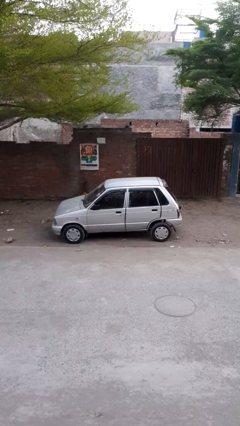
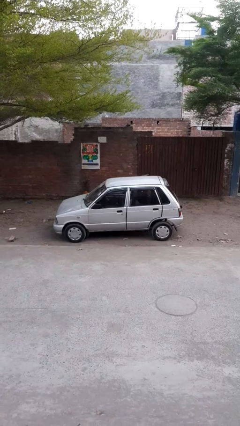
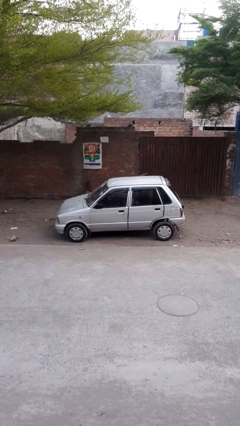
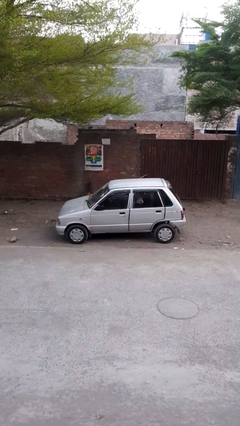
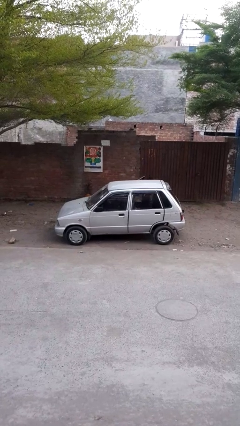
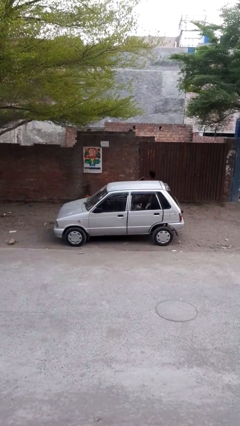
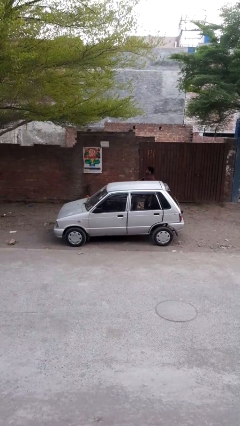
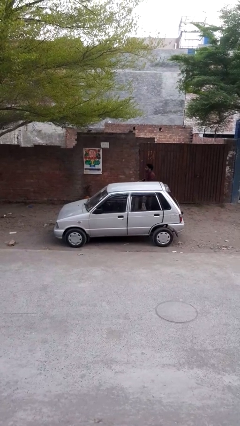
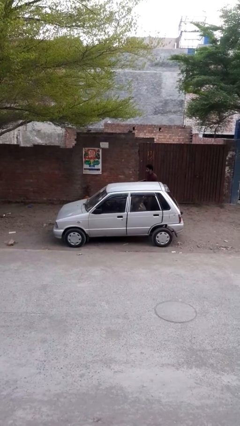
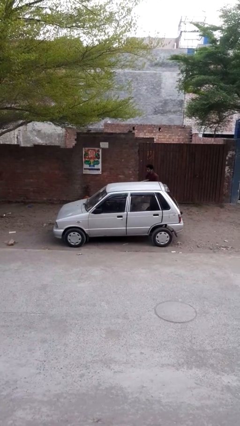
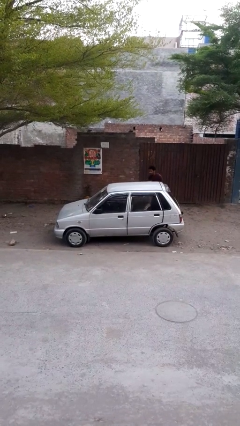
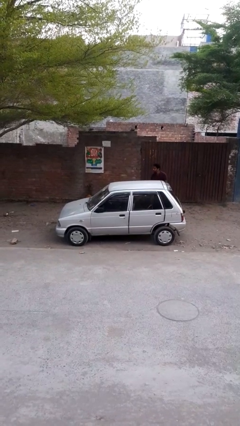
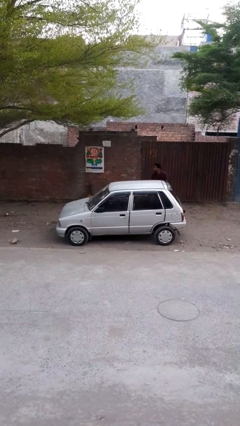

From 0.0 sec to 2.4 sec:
car drops off person

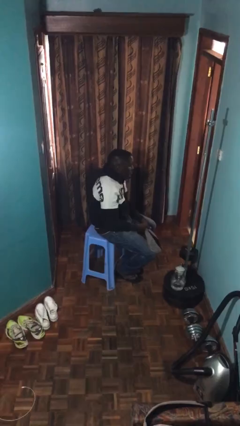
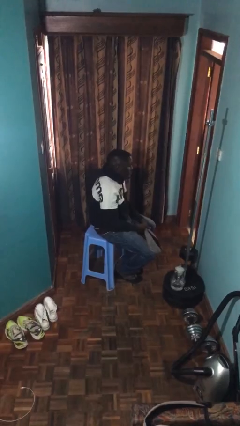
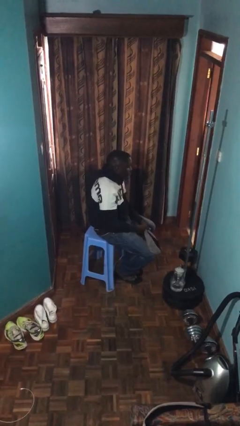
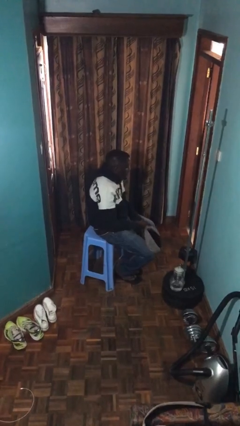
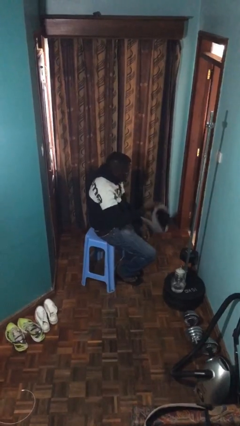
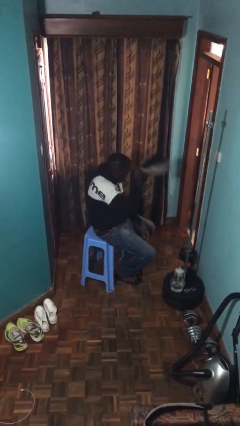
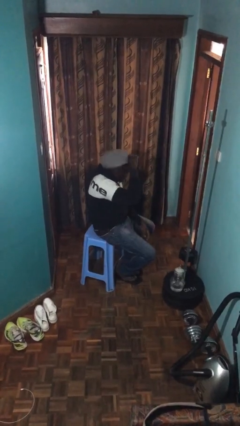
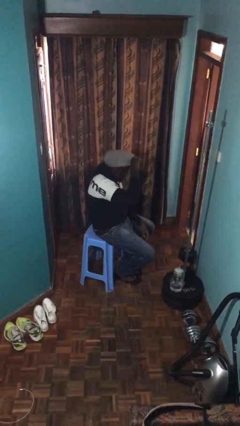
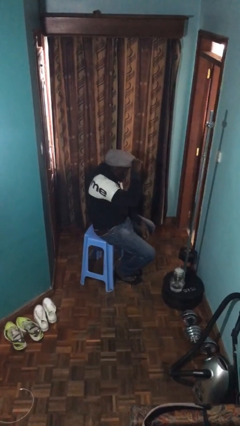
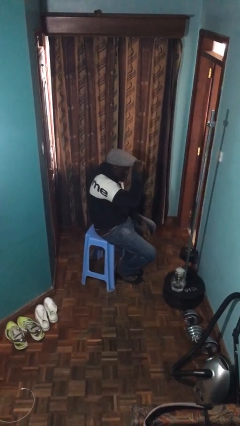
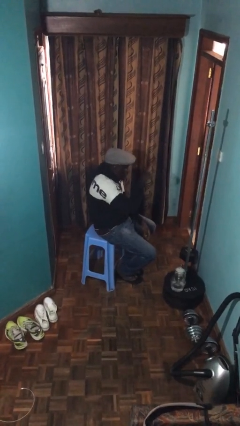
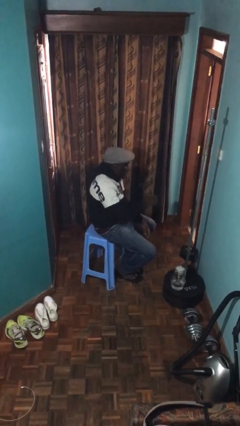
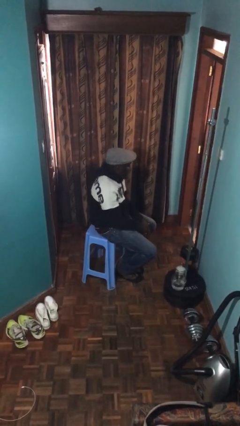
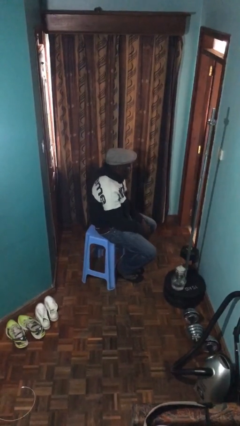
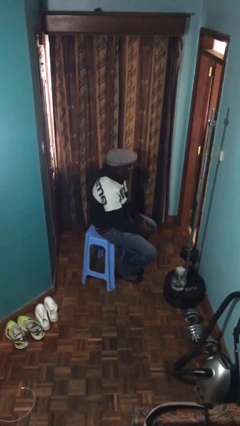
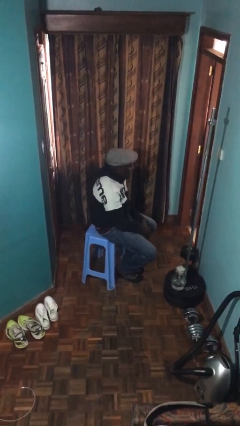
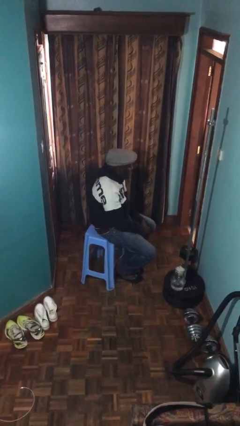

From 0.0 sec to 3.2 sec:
person puts on hat

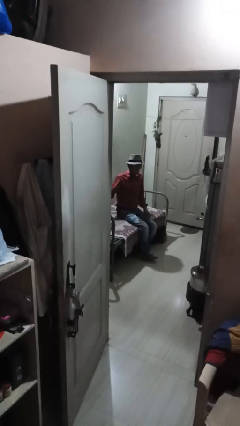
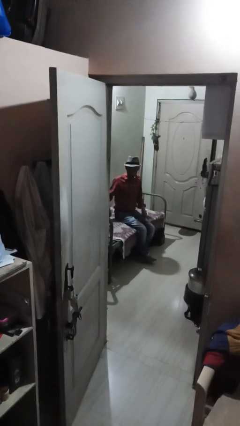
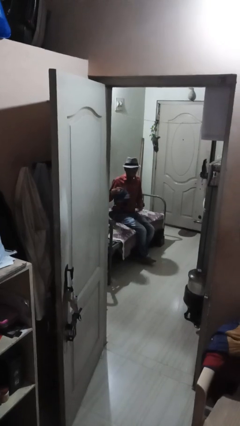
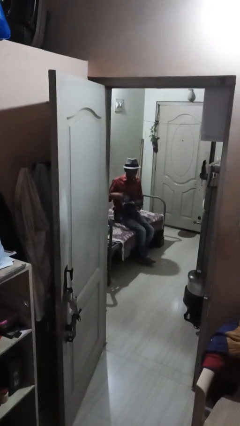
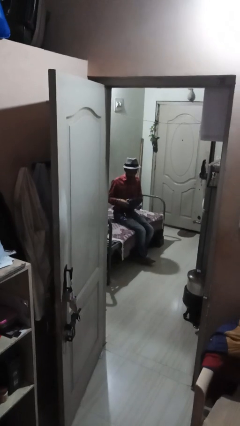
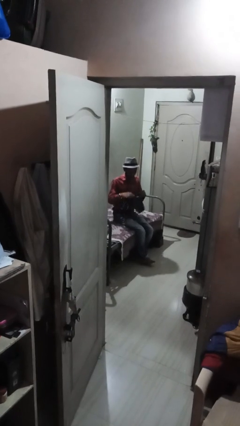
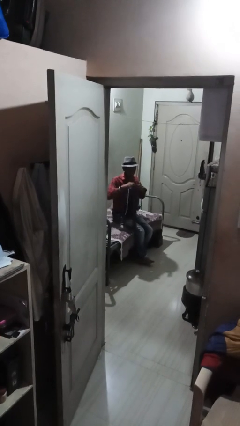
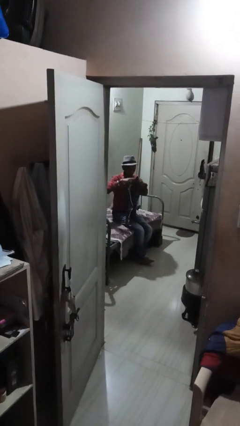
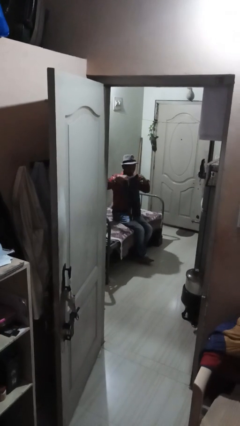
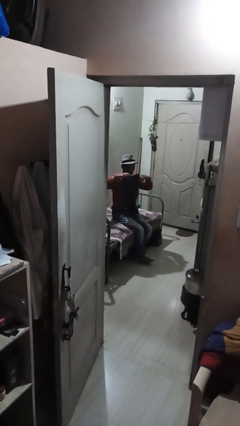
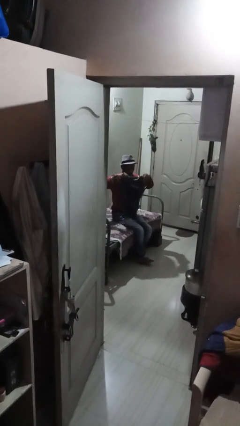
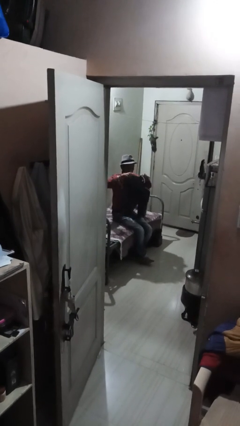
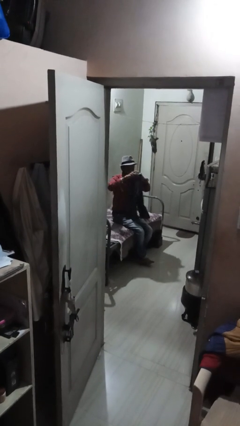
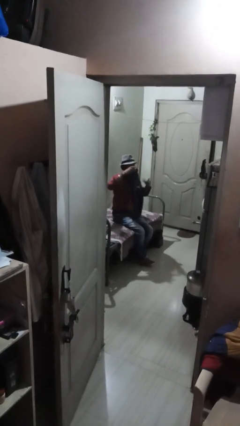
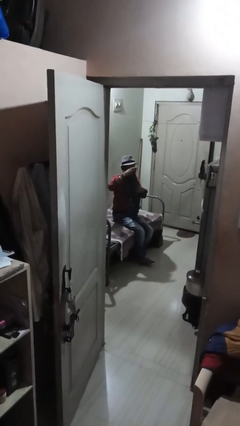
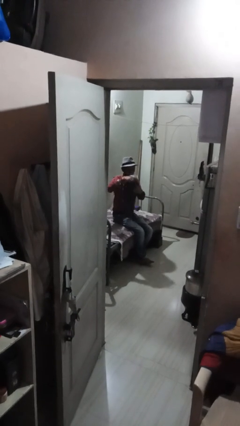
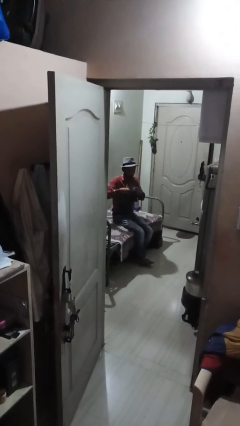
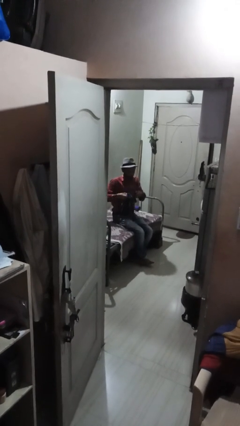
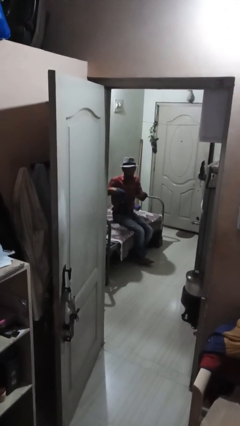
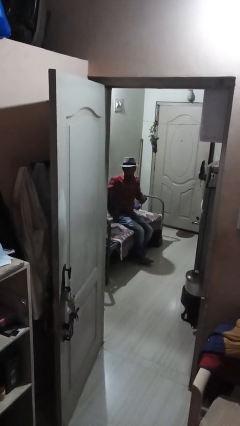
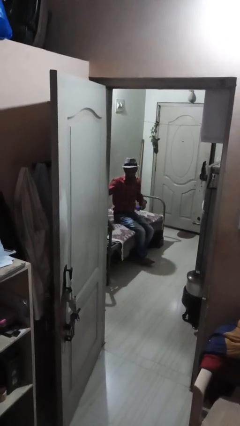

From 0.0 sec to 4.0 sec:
person folds pants

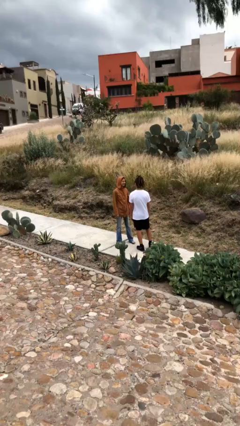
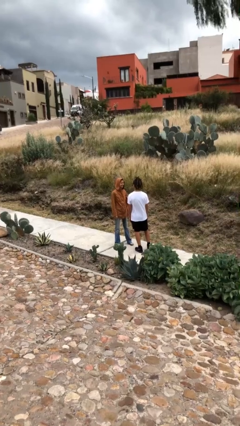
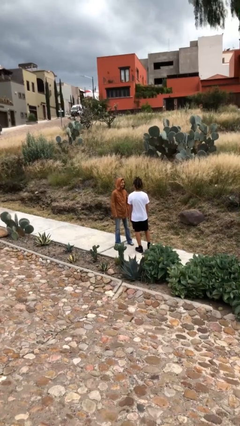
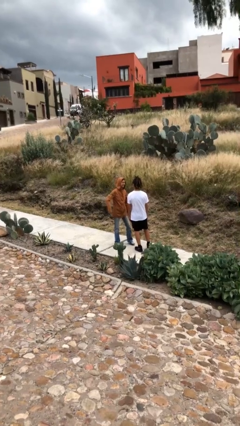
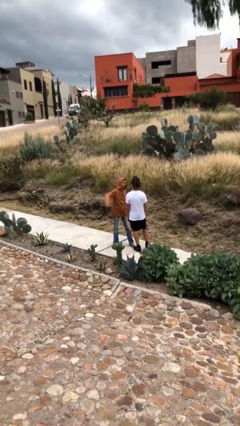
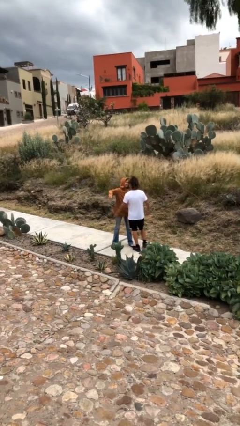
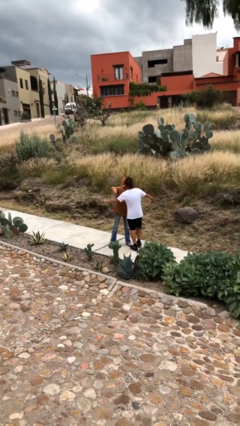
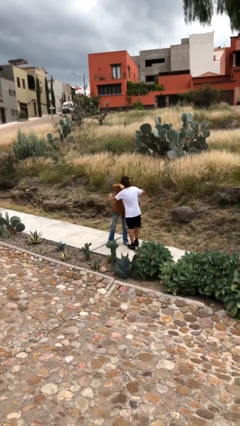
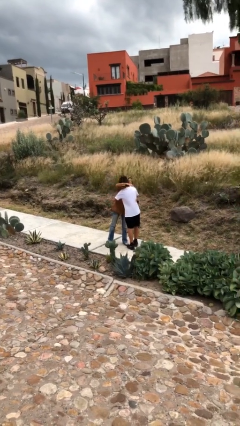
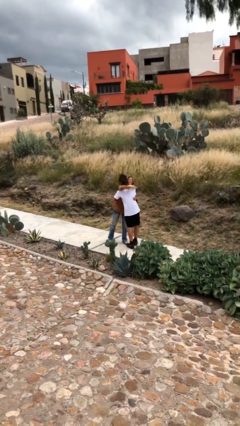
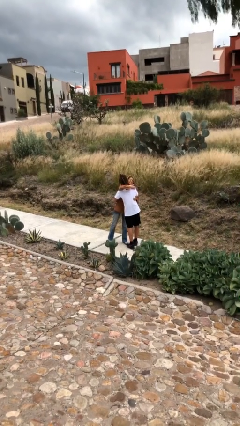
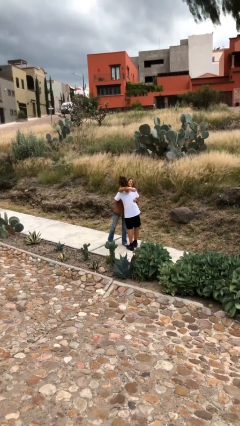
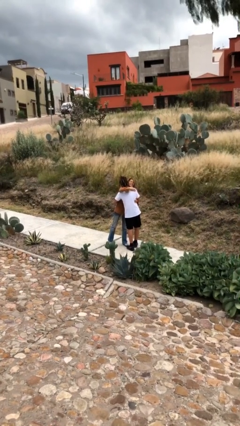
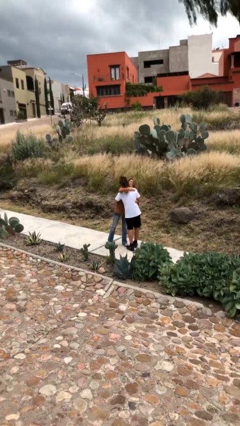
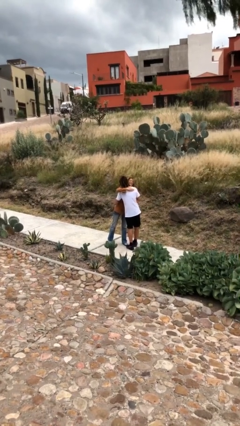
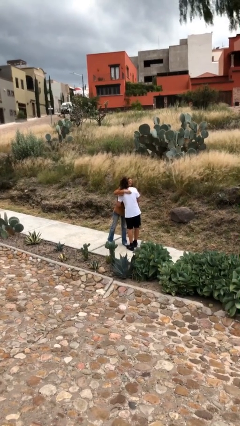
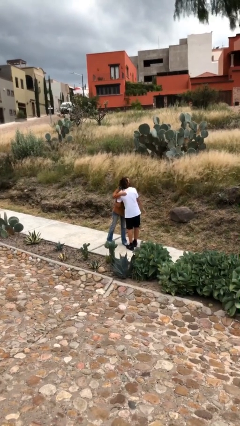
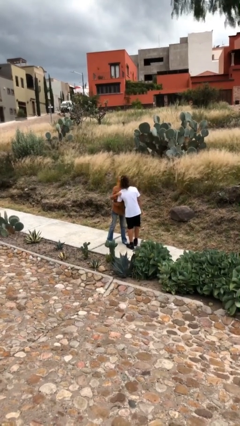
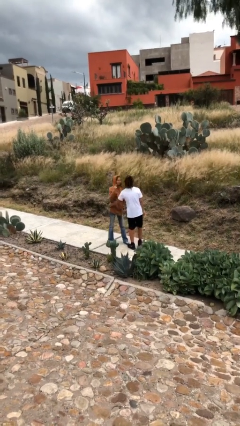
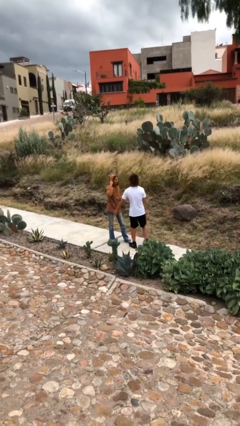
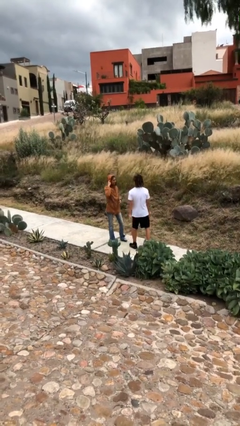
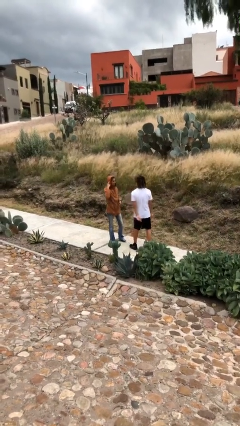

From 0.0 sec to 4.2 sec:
person embraces person

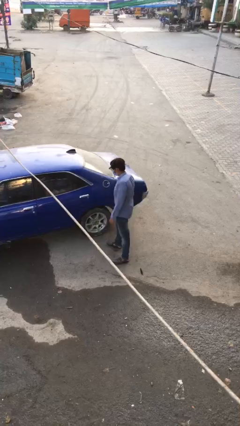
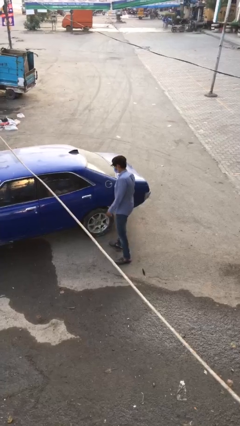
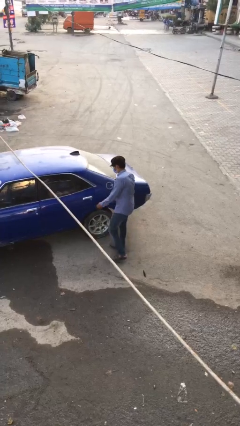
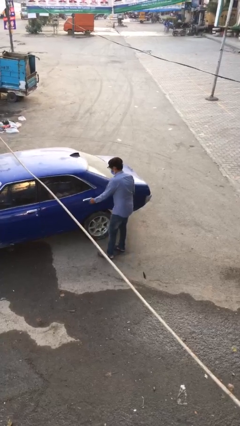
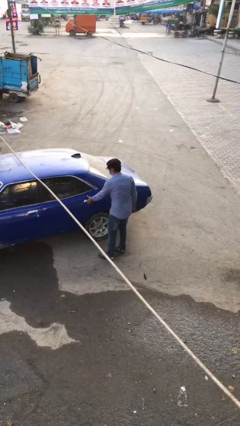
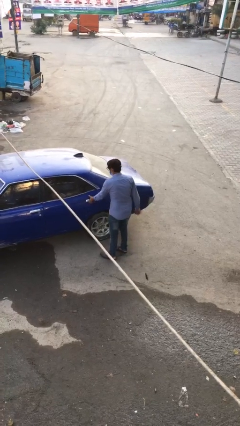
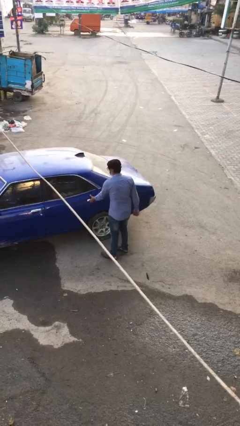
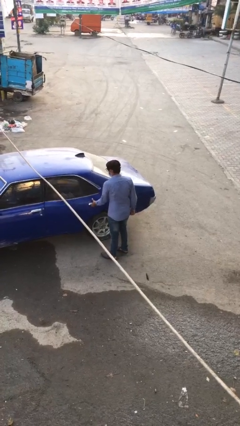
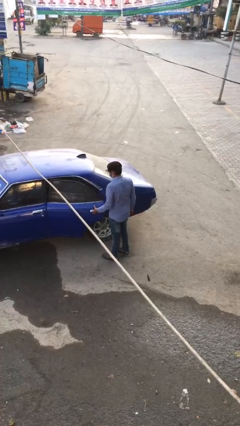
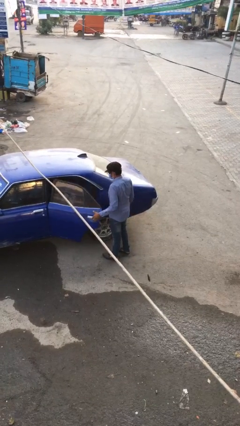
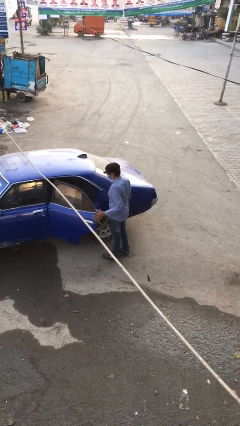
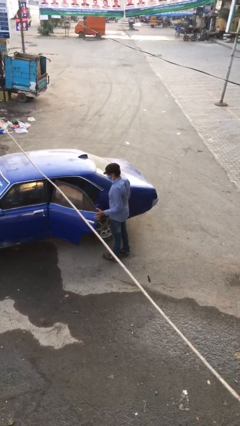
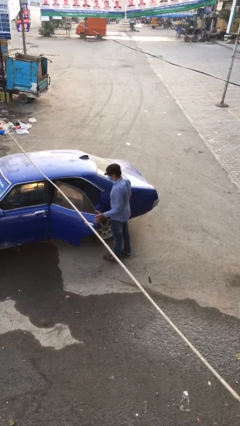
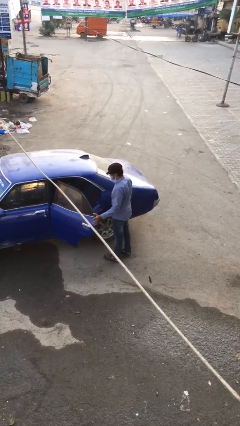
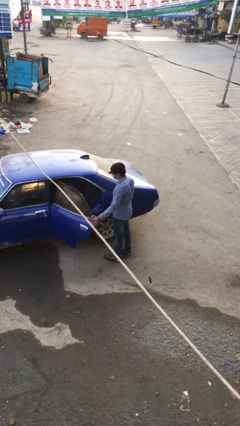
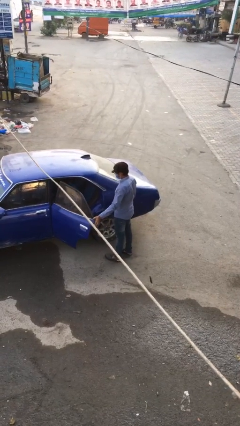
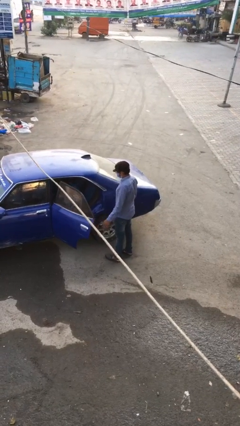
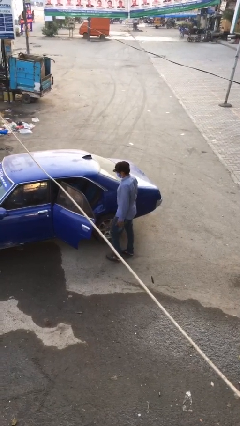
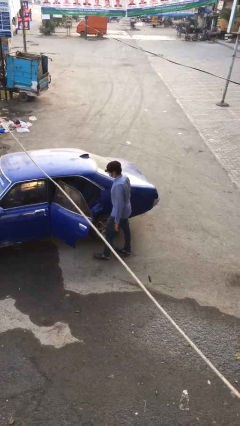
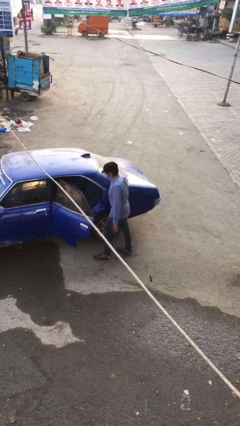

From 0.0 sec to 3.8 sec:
person opens car door
